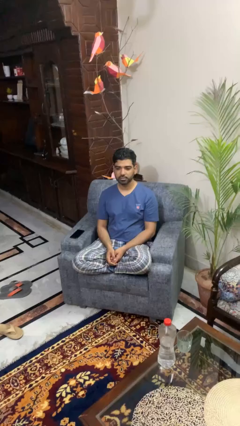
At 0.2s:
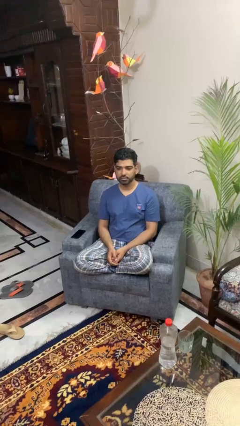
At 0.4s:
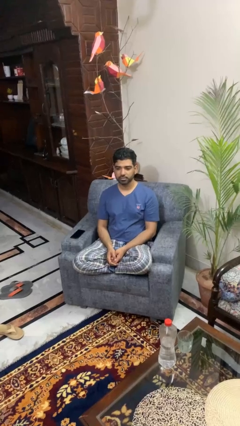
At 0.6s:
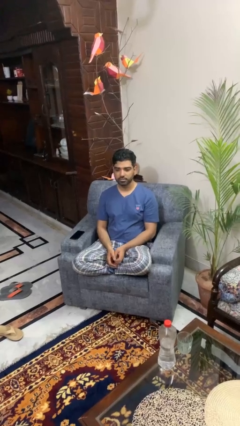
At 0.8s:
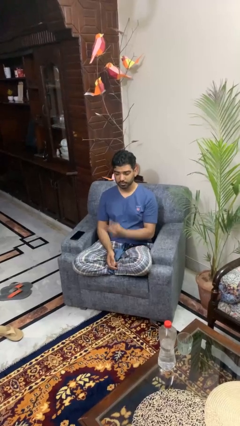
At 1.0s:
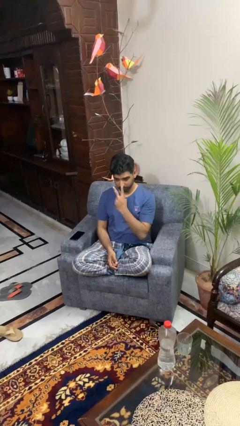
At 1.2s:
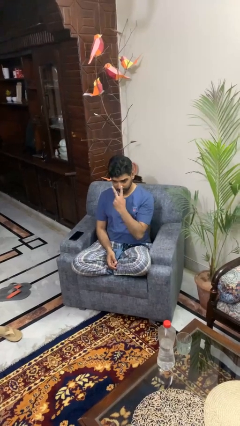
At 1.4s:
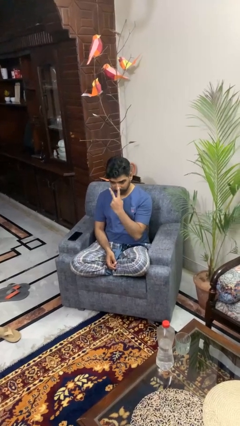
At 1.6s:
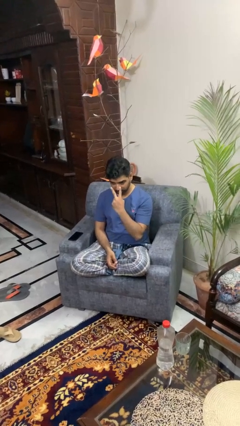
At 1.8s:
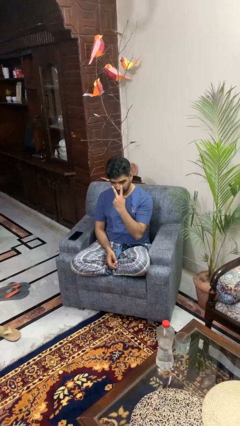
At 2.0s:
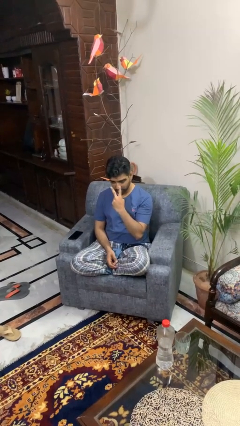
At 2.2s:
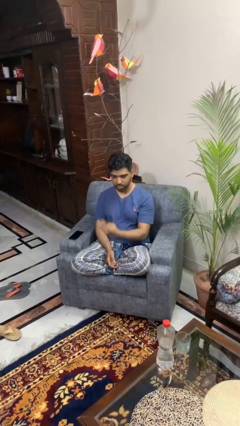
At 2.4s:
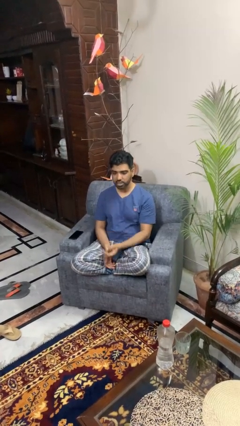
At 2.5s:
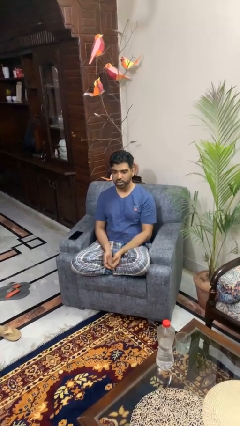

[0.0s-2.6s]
person gestures watch closely

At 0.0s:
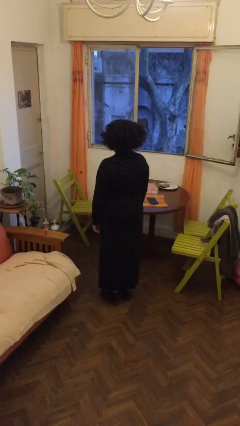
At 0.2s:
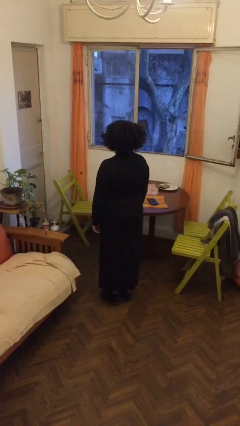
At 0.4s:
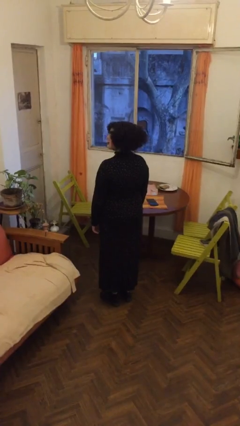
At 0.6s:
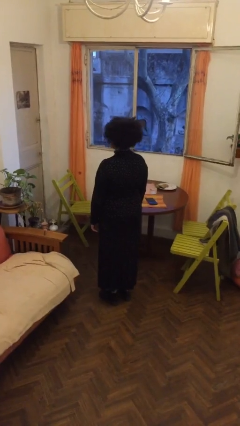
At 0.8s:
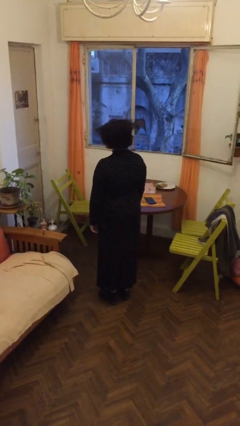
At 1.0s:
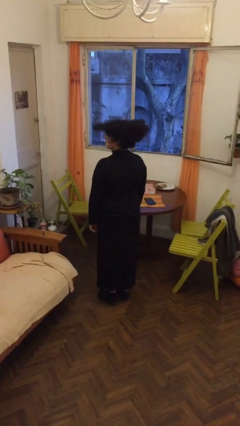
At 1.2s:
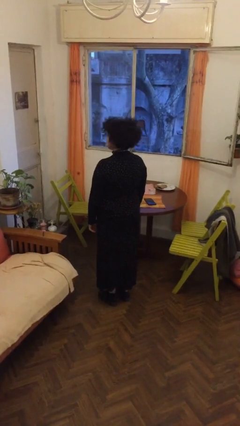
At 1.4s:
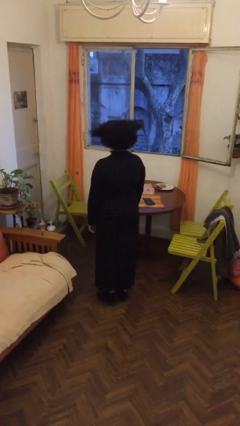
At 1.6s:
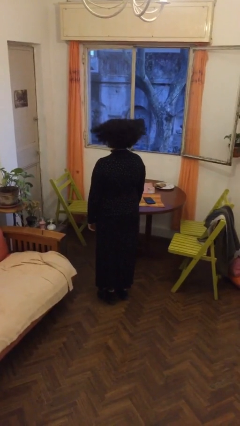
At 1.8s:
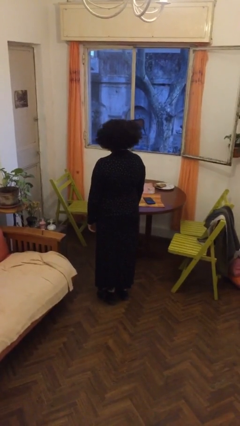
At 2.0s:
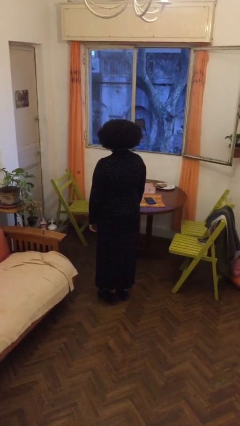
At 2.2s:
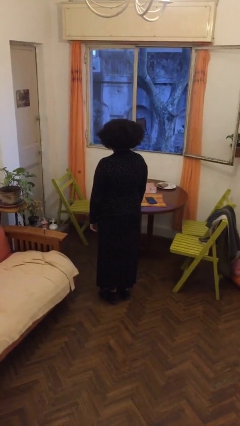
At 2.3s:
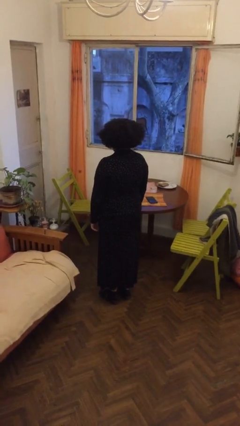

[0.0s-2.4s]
person shakes head

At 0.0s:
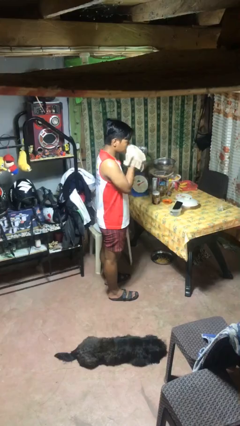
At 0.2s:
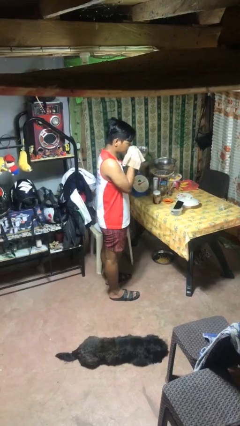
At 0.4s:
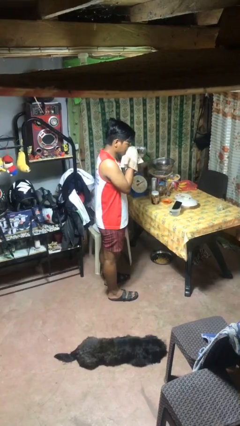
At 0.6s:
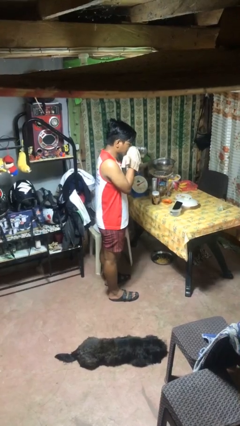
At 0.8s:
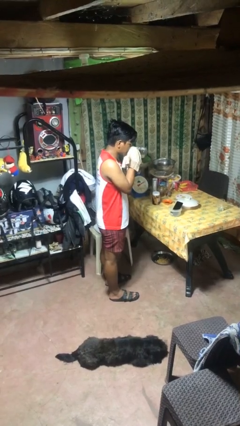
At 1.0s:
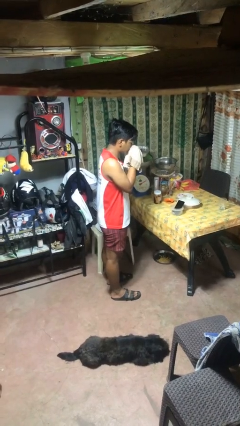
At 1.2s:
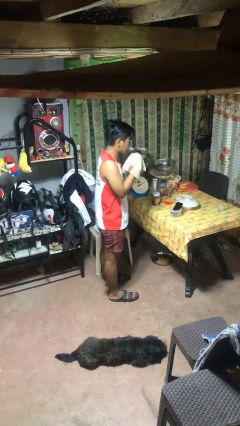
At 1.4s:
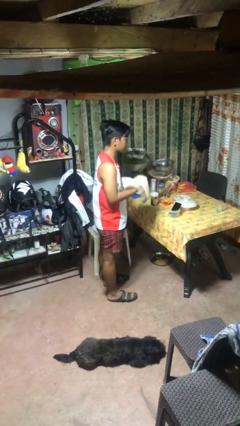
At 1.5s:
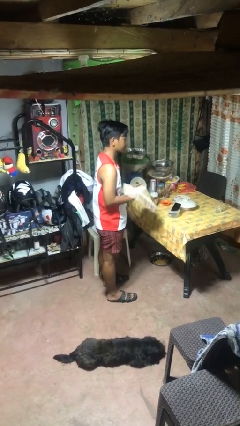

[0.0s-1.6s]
person blows nose

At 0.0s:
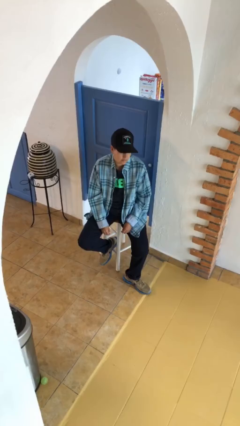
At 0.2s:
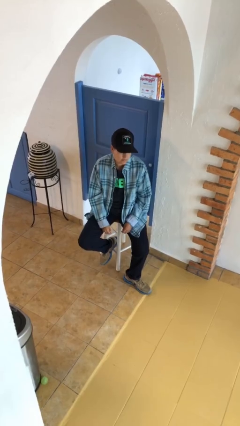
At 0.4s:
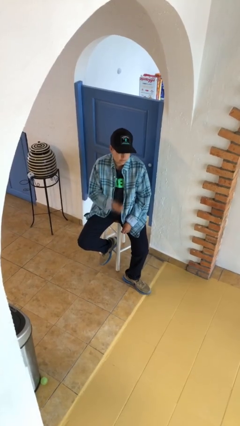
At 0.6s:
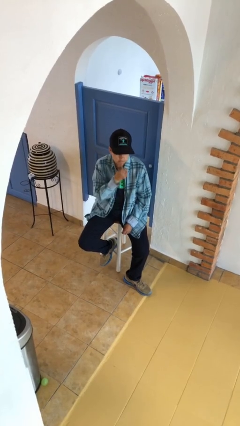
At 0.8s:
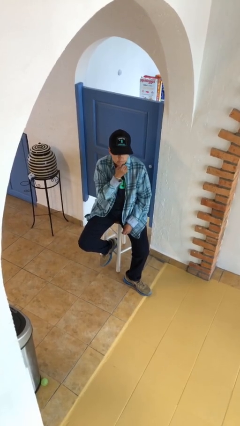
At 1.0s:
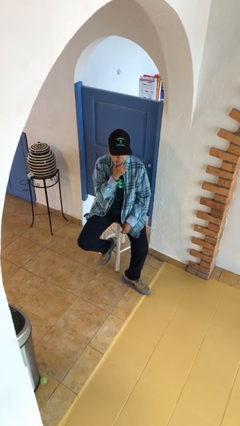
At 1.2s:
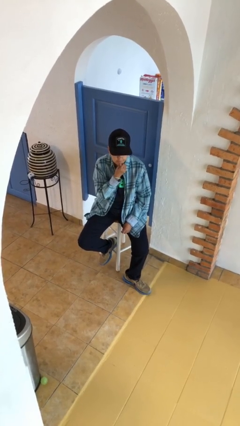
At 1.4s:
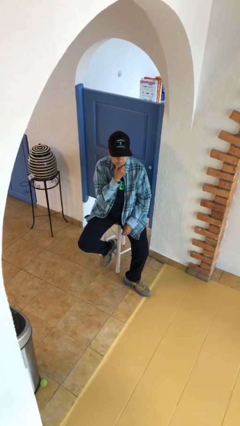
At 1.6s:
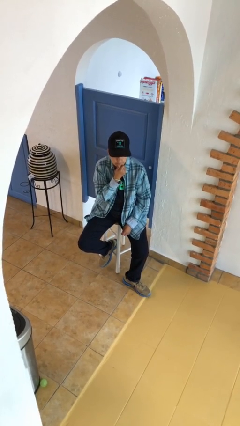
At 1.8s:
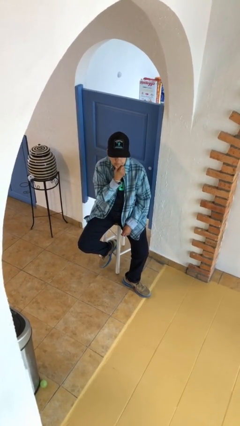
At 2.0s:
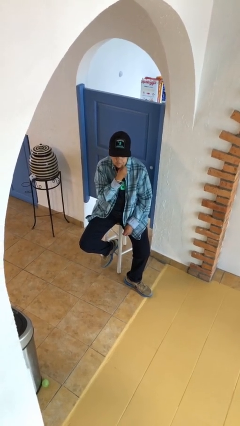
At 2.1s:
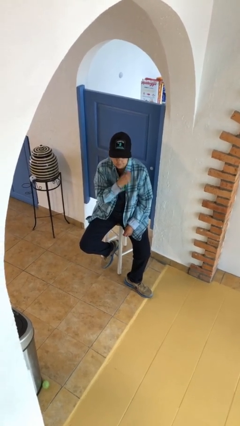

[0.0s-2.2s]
person strokes chin

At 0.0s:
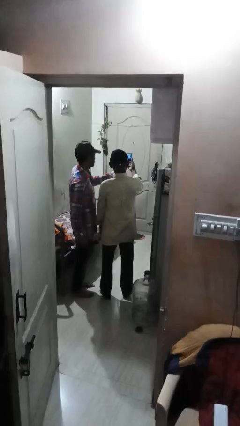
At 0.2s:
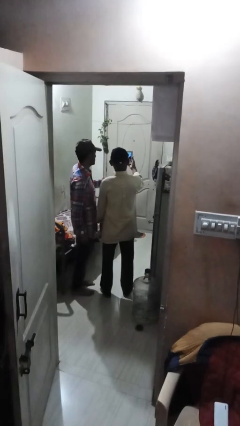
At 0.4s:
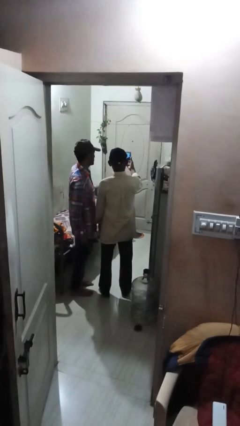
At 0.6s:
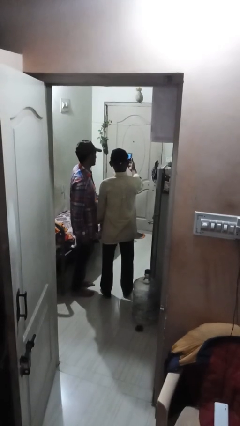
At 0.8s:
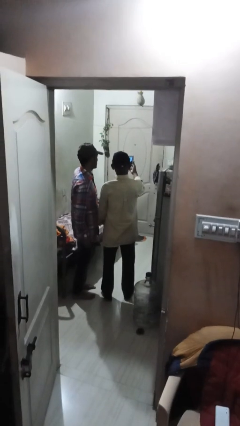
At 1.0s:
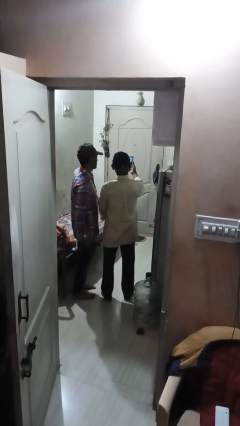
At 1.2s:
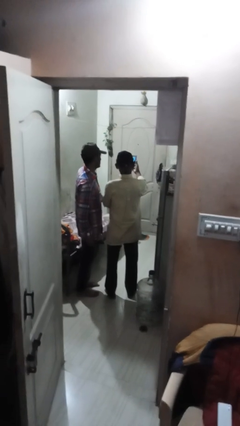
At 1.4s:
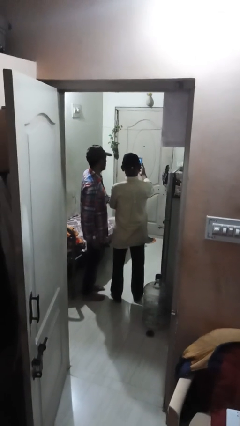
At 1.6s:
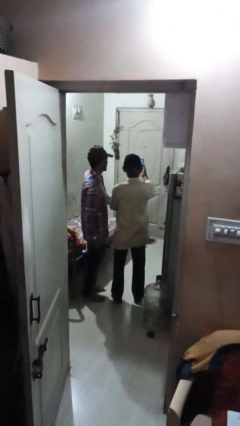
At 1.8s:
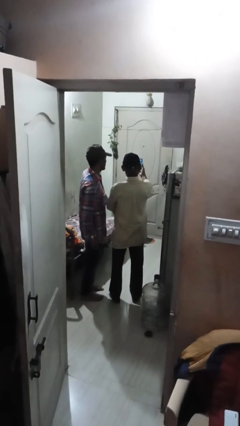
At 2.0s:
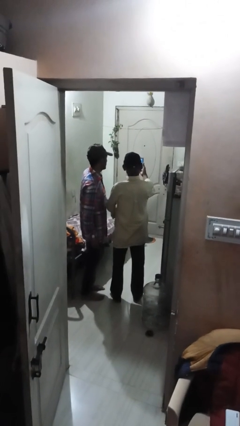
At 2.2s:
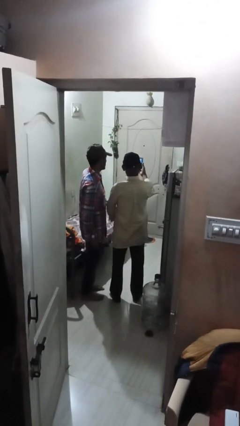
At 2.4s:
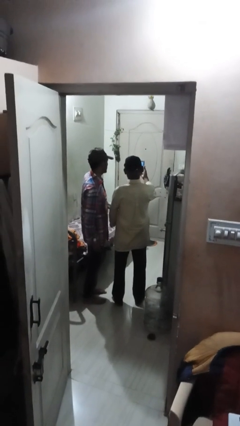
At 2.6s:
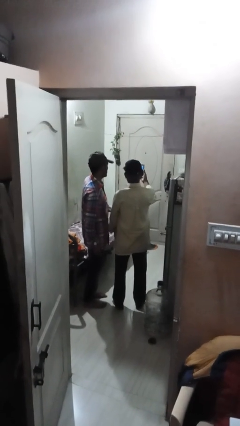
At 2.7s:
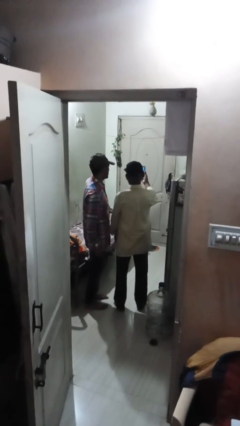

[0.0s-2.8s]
person takes selfie with person

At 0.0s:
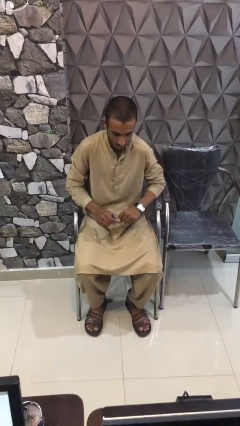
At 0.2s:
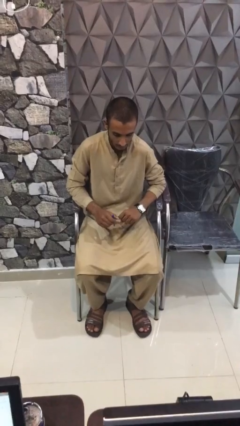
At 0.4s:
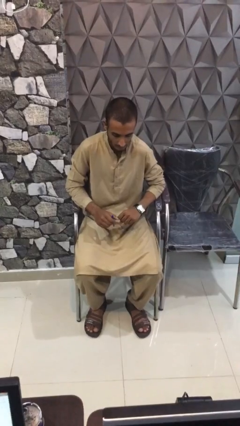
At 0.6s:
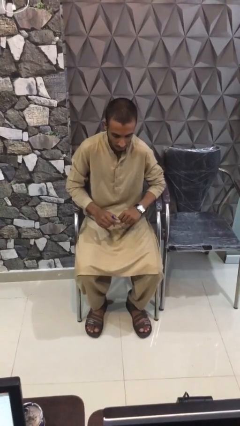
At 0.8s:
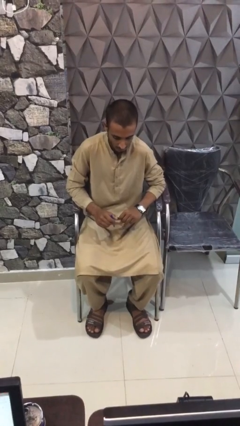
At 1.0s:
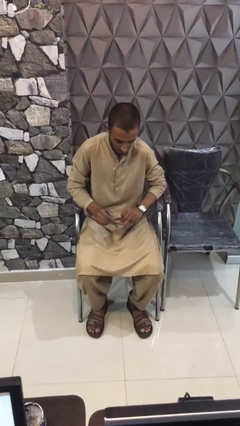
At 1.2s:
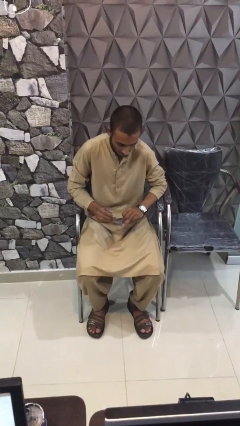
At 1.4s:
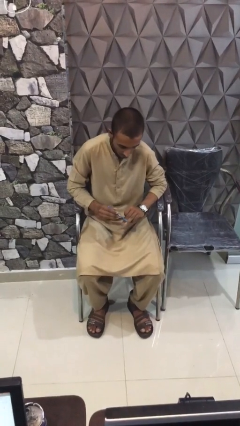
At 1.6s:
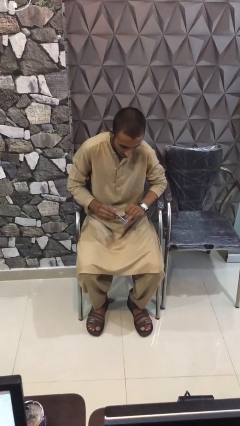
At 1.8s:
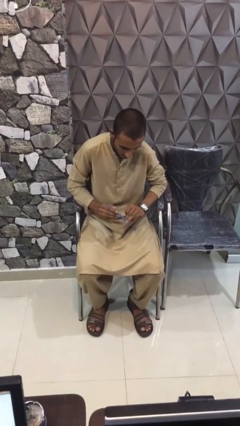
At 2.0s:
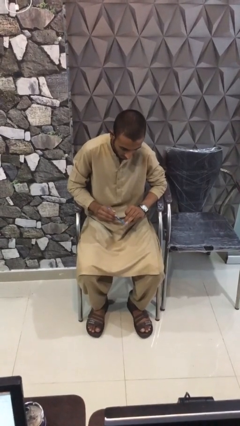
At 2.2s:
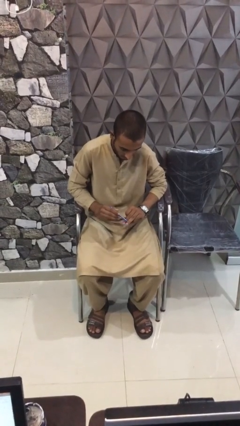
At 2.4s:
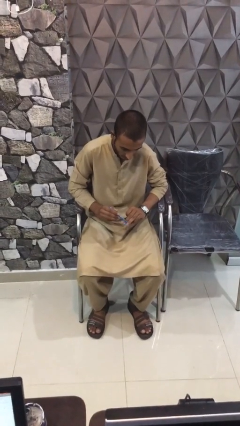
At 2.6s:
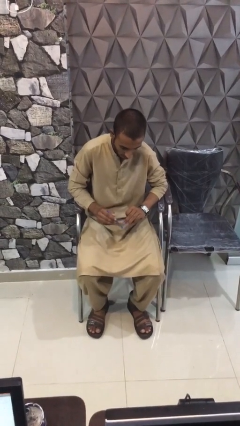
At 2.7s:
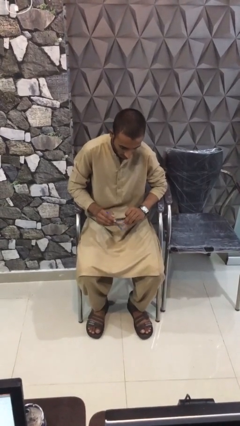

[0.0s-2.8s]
person paints fingernails

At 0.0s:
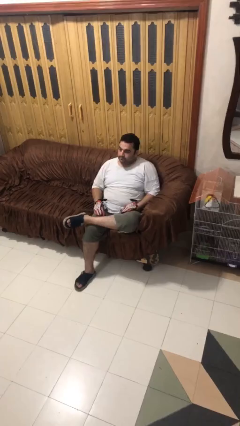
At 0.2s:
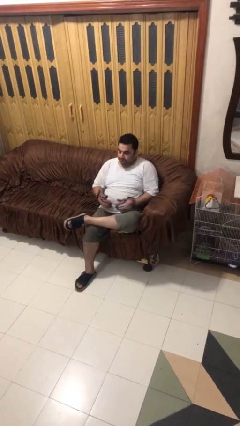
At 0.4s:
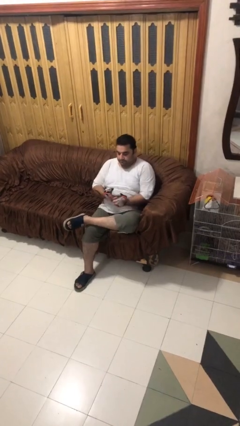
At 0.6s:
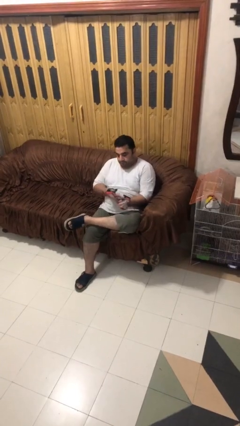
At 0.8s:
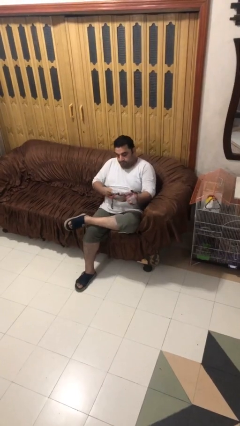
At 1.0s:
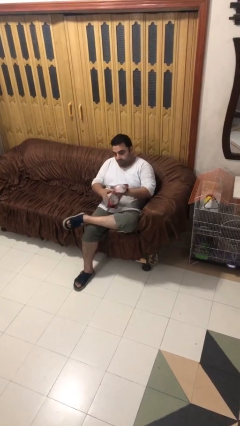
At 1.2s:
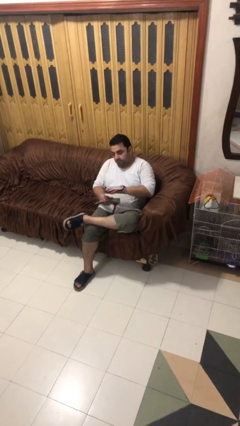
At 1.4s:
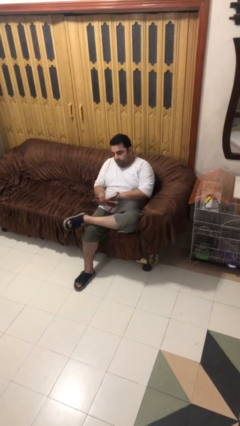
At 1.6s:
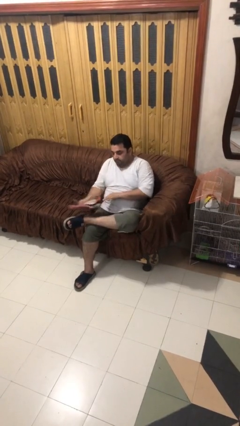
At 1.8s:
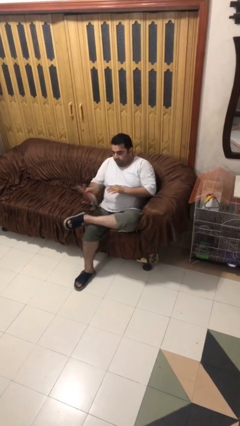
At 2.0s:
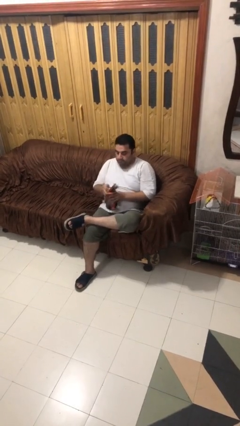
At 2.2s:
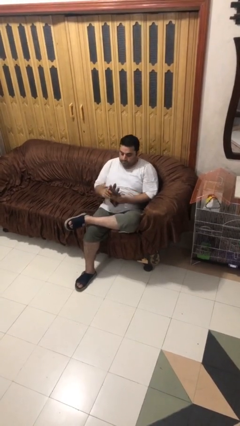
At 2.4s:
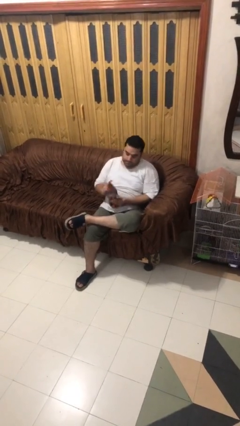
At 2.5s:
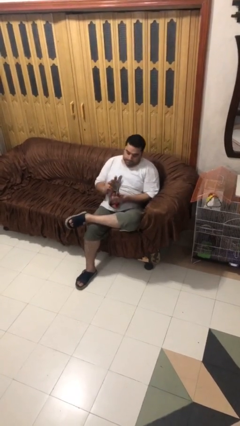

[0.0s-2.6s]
person takes off gloves

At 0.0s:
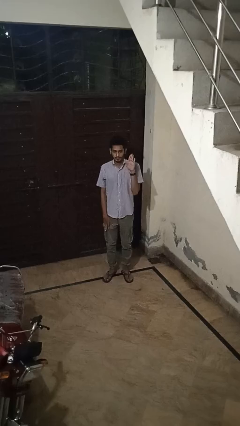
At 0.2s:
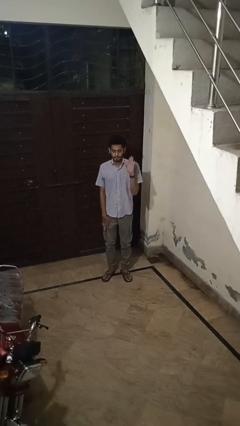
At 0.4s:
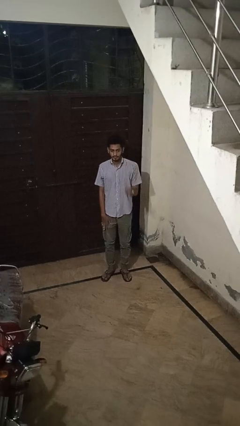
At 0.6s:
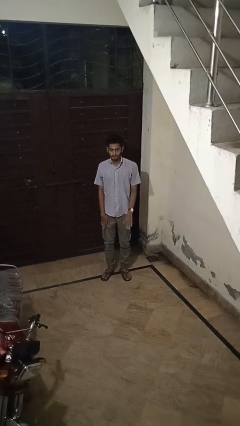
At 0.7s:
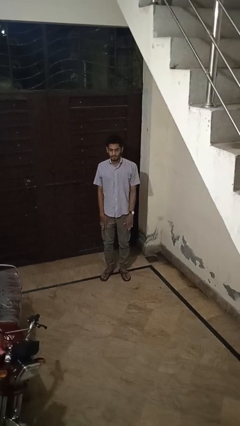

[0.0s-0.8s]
person gestures lower hand
